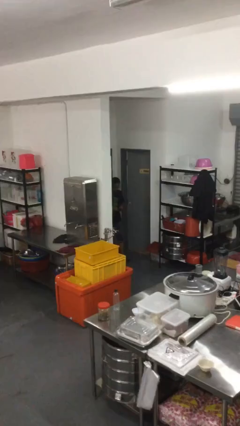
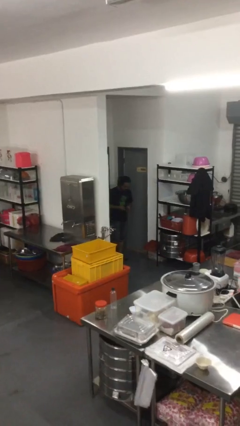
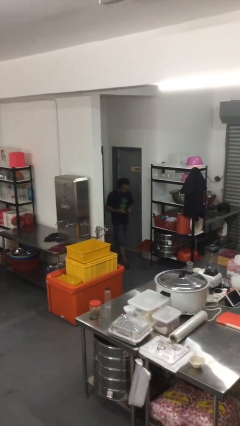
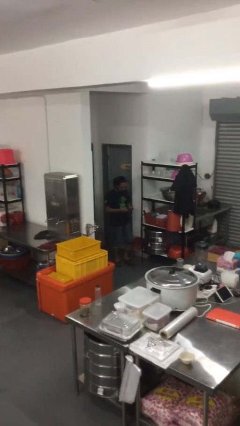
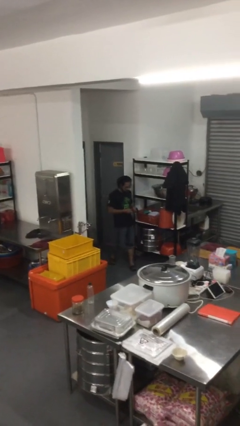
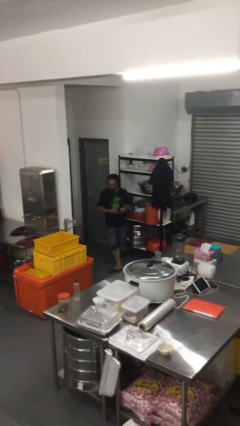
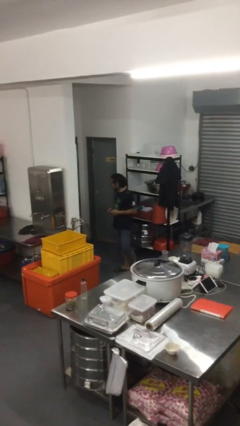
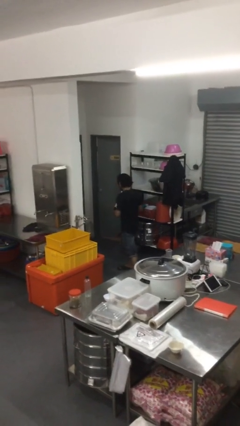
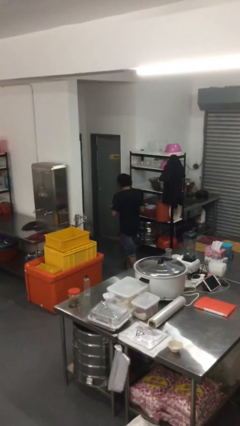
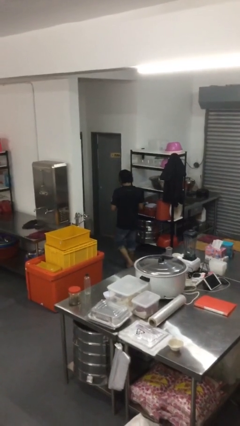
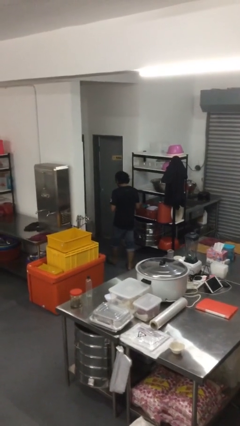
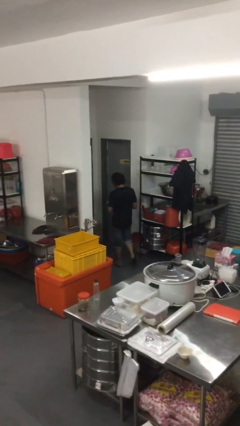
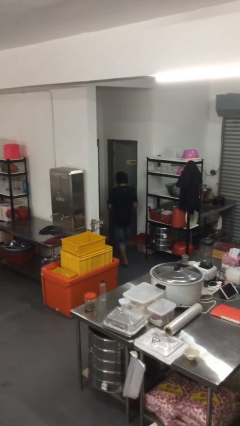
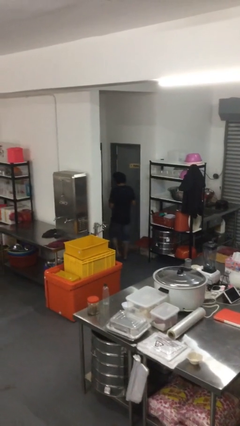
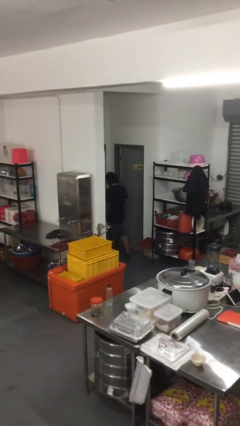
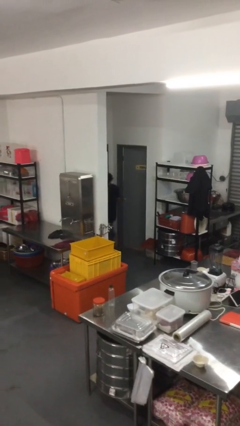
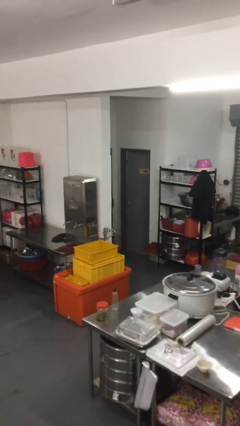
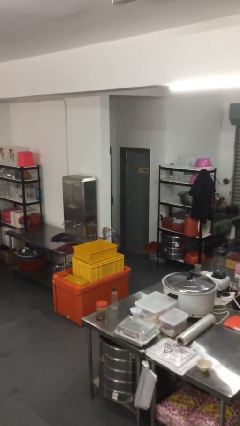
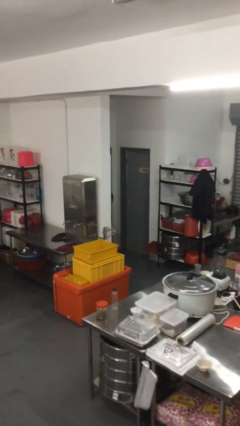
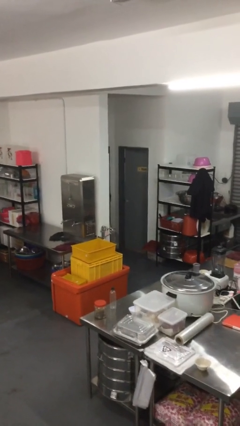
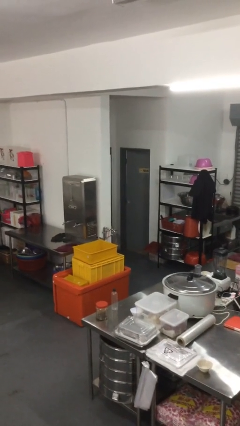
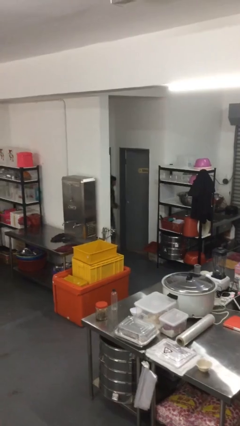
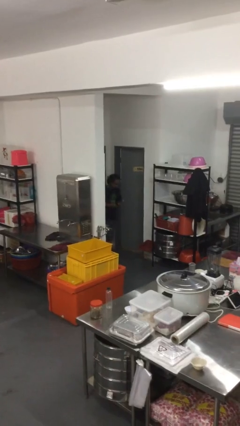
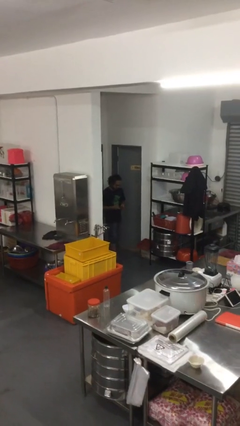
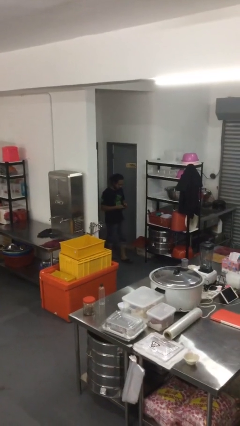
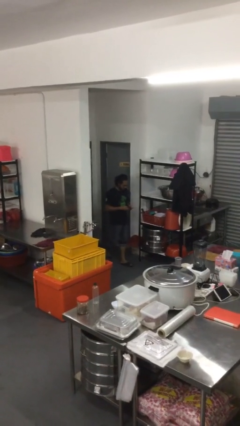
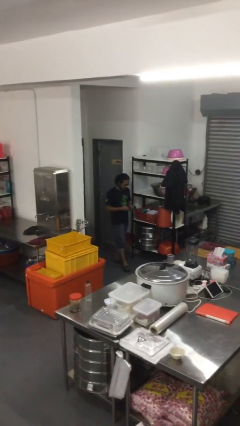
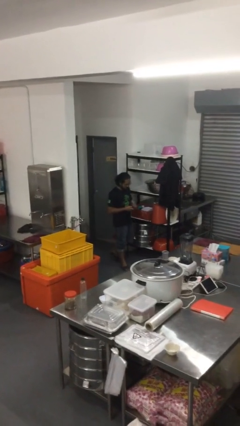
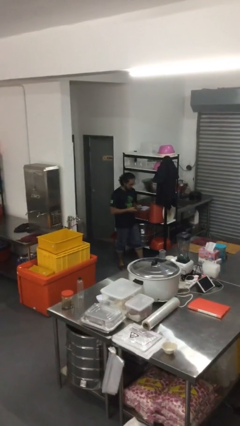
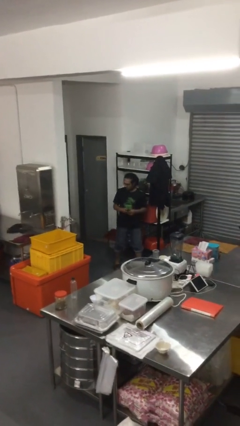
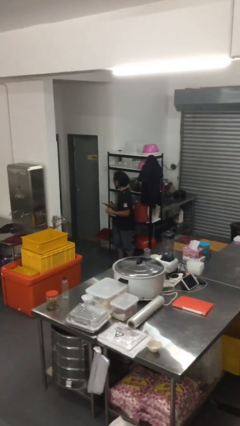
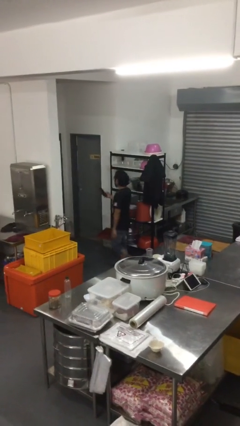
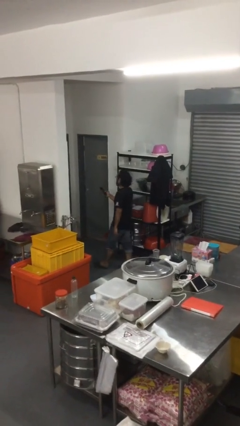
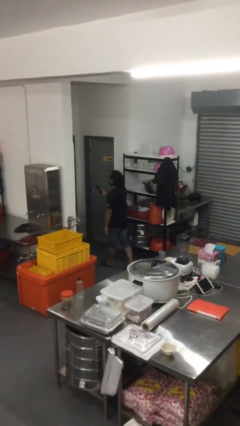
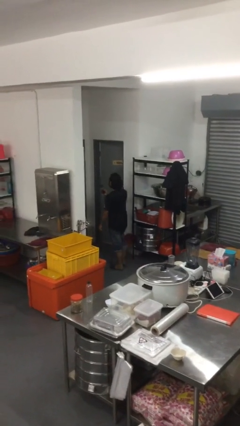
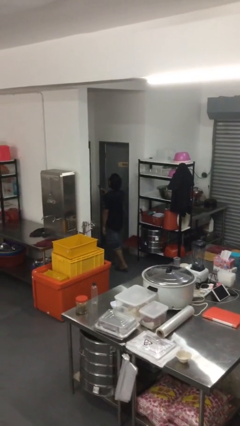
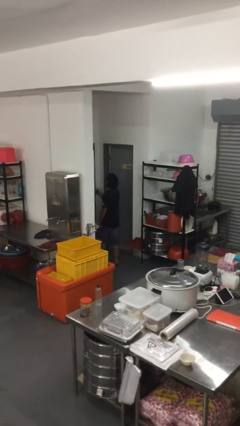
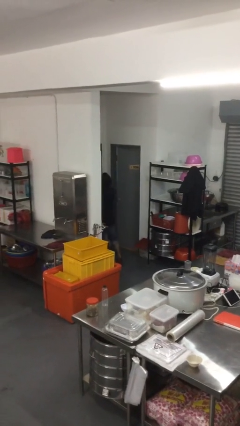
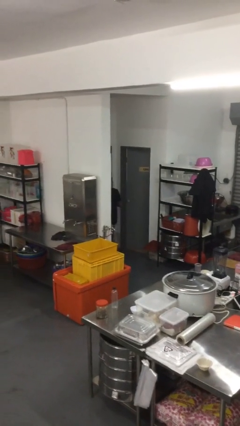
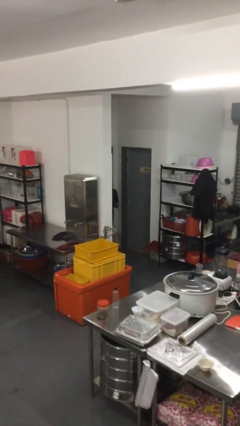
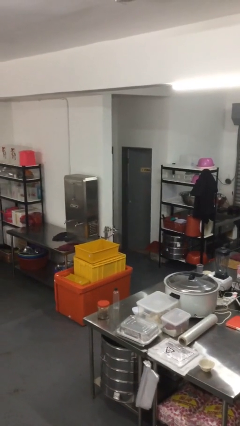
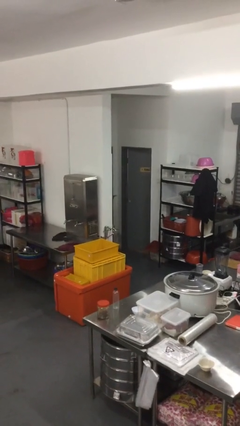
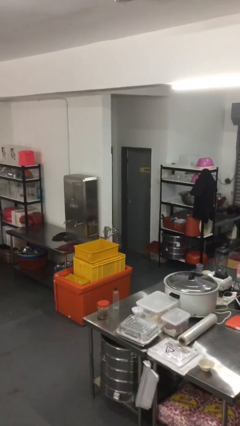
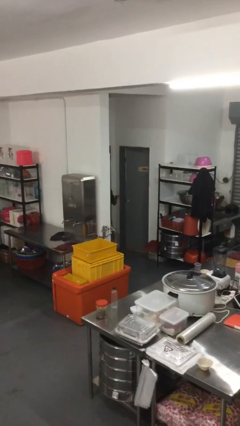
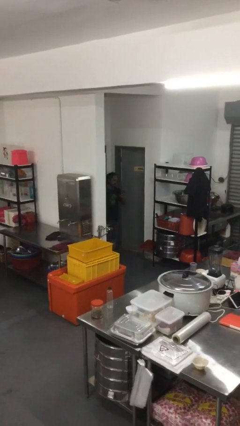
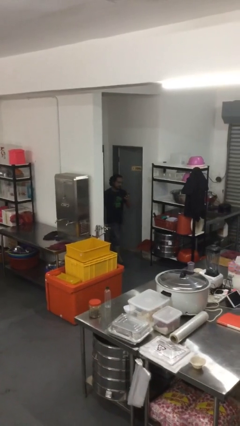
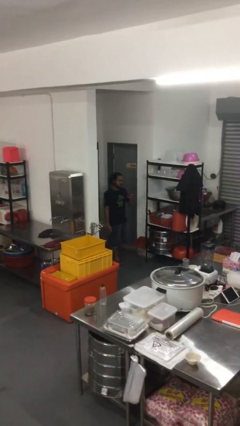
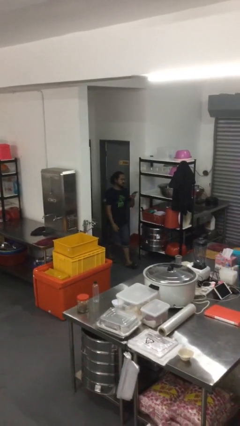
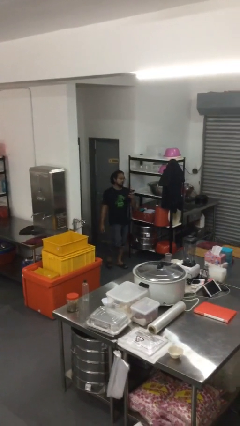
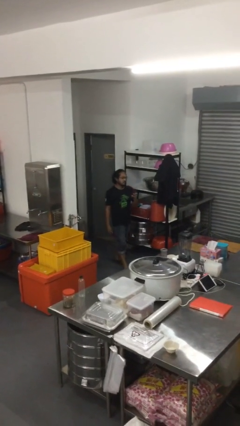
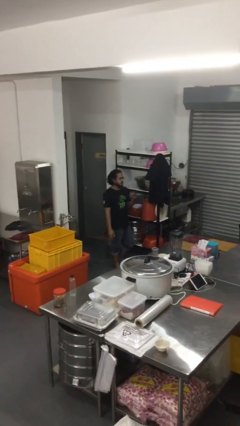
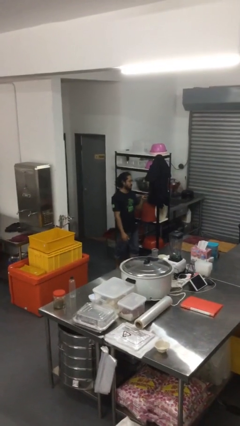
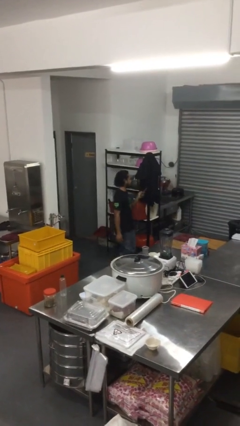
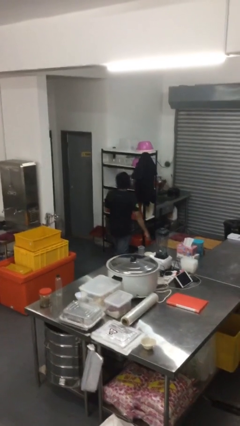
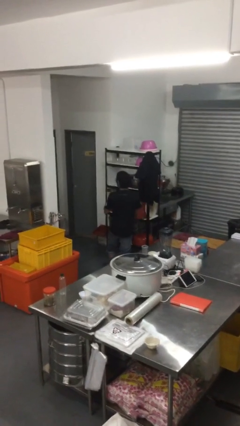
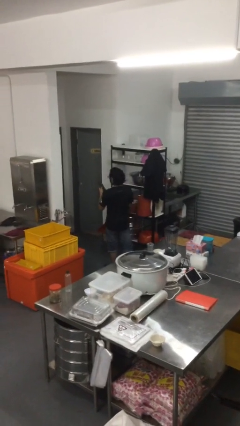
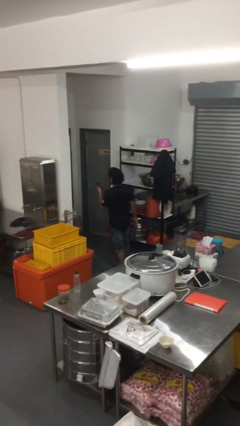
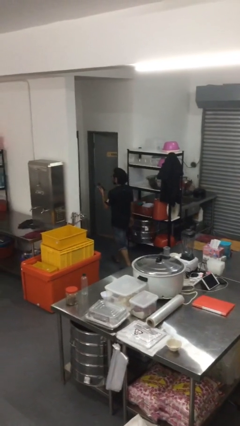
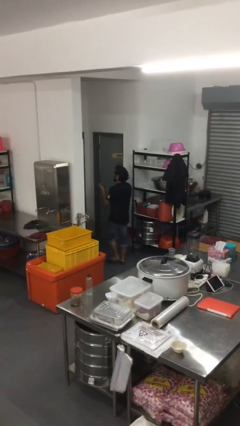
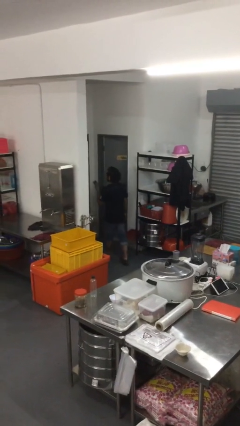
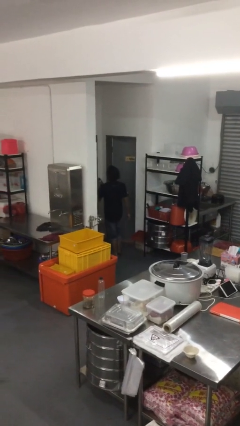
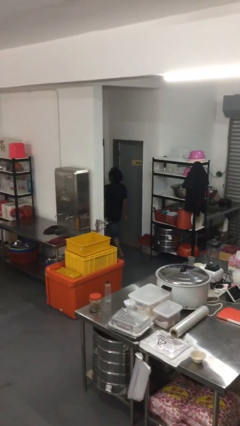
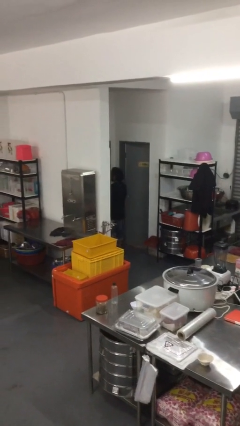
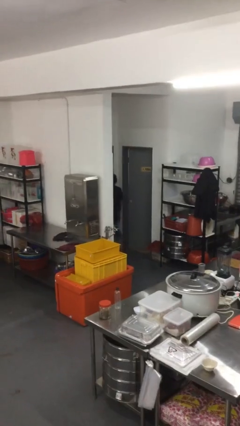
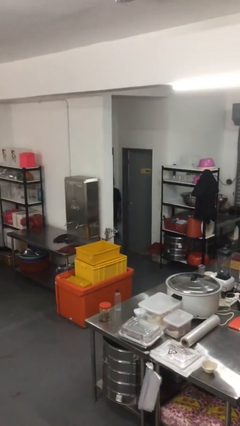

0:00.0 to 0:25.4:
person texts on phone

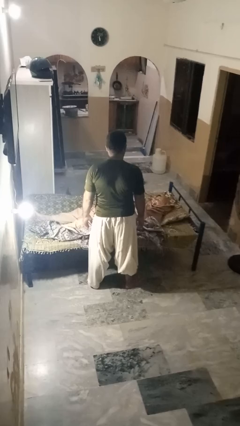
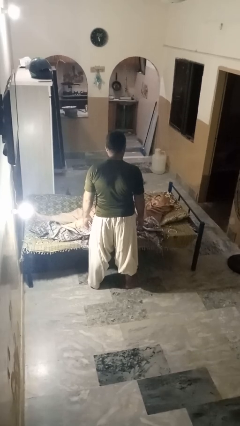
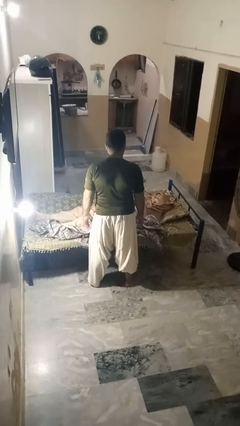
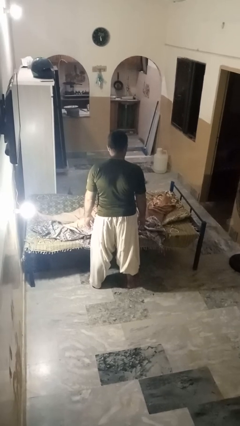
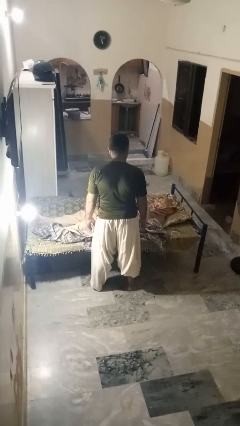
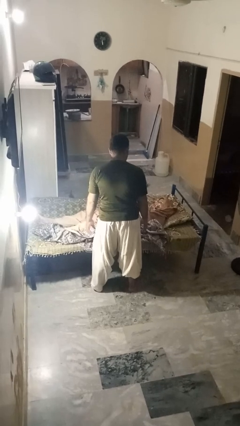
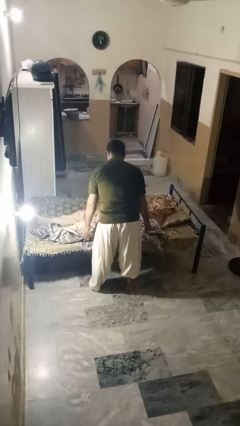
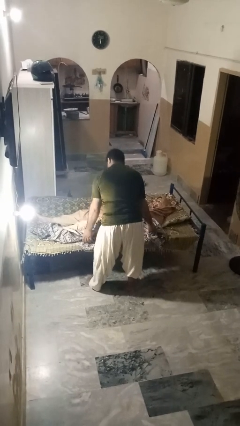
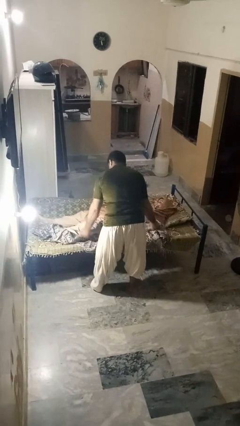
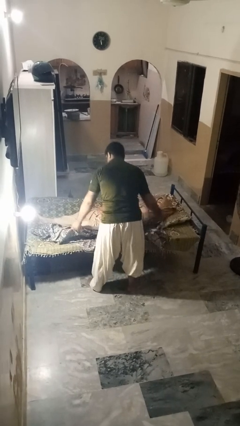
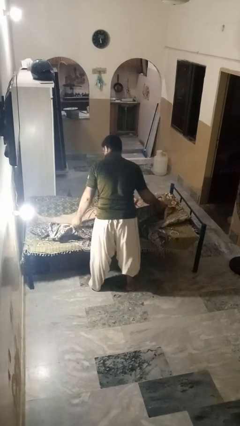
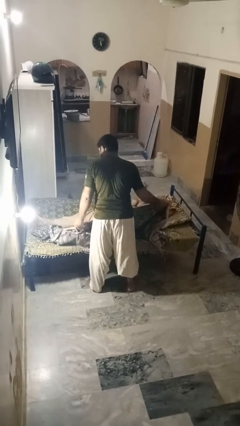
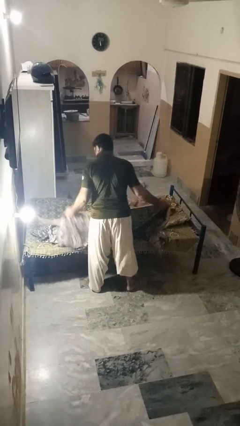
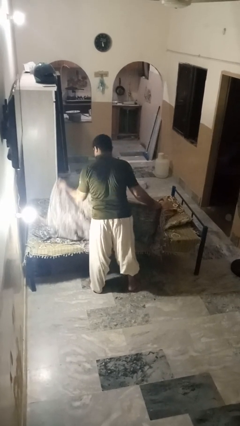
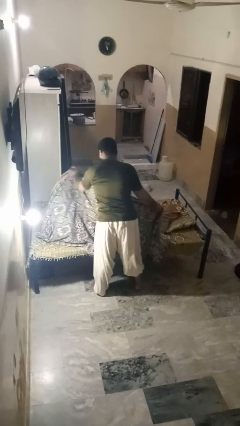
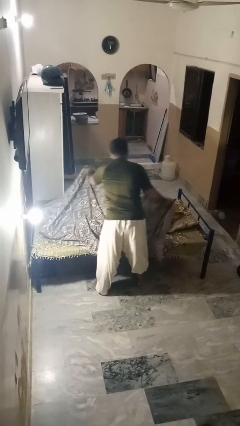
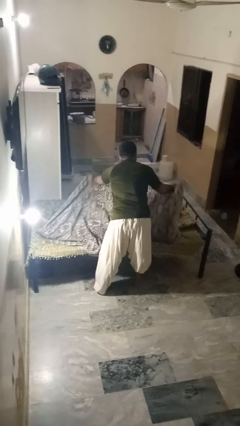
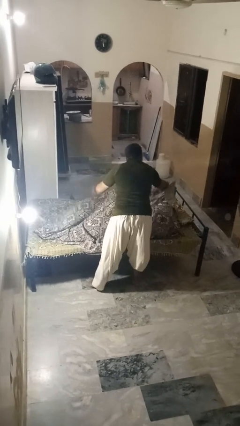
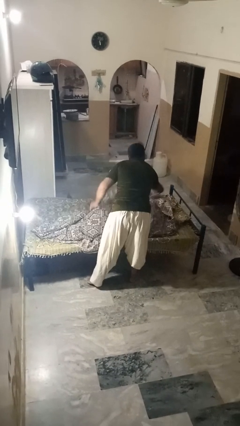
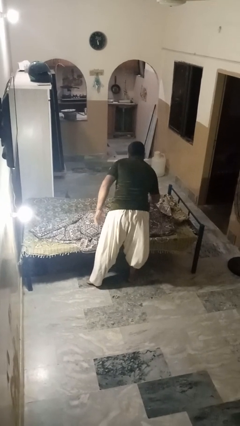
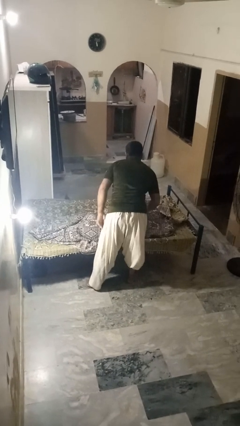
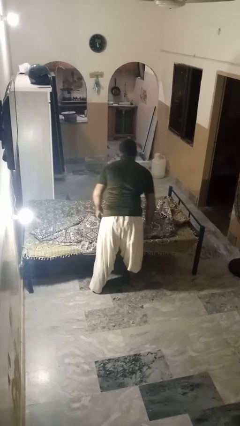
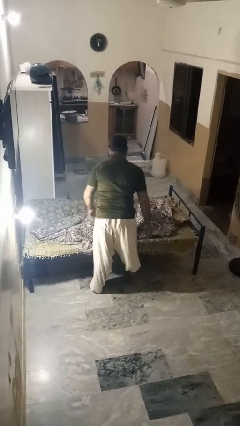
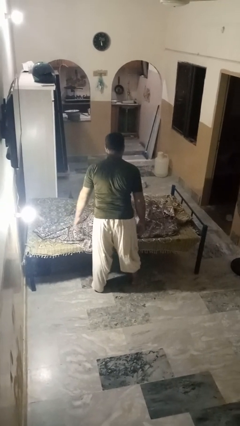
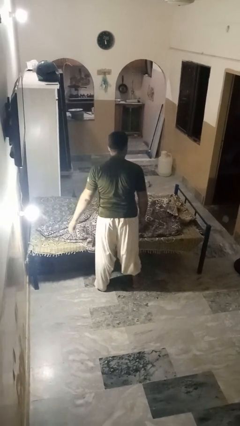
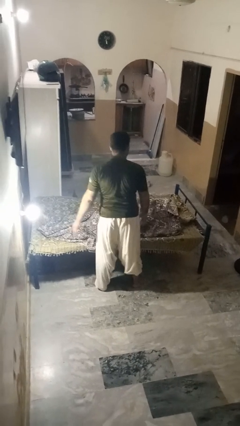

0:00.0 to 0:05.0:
person covers friend with blanket

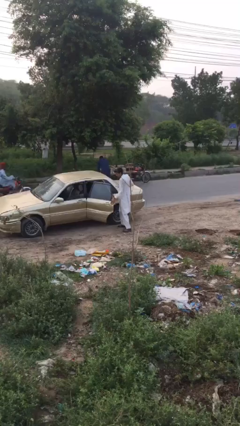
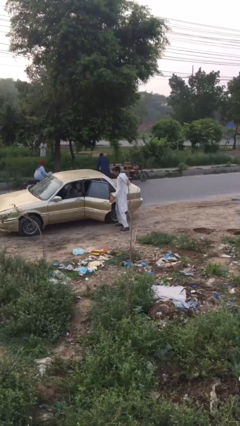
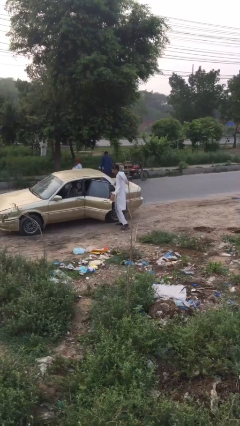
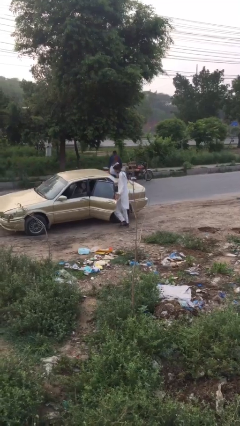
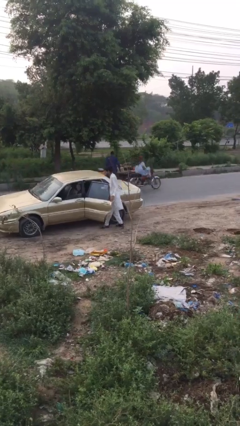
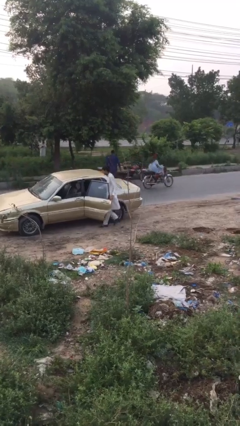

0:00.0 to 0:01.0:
person opens car door
